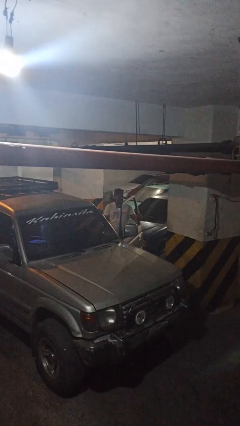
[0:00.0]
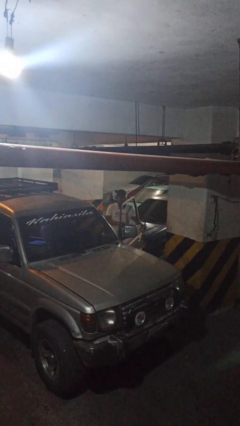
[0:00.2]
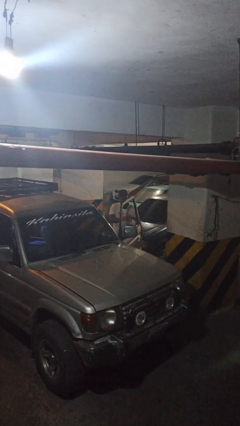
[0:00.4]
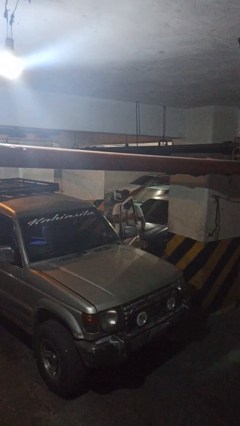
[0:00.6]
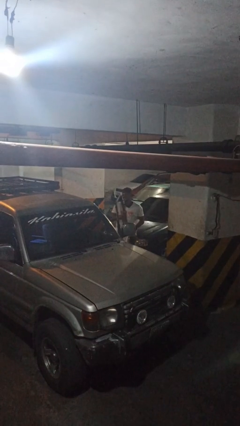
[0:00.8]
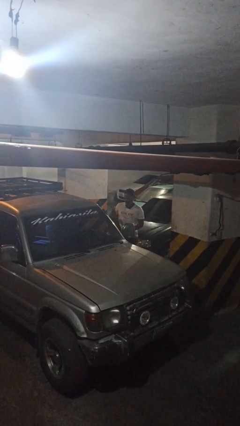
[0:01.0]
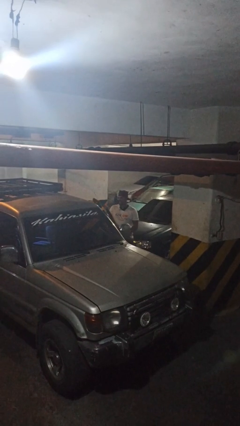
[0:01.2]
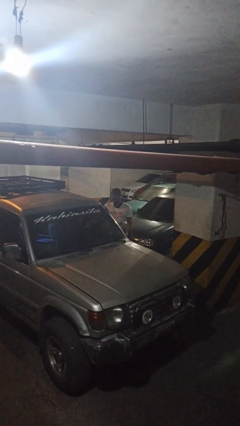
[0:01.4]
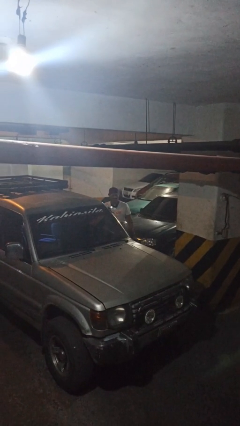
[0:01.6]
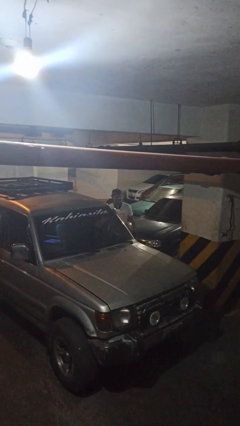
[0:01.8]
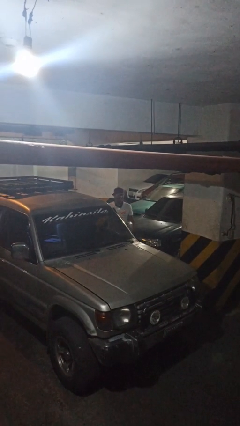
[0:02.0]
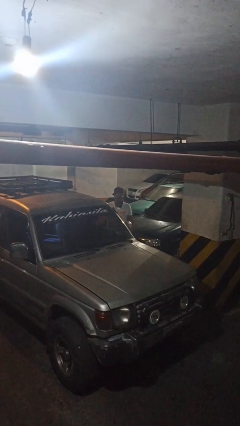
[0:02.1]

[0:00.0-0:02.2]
person closes car door

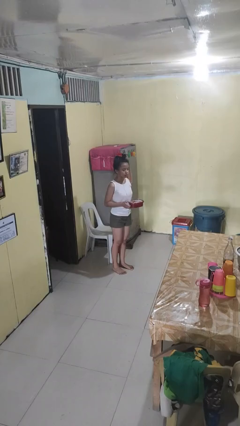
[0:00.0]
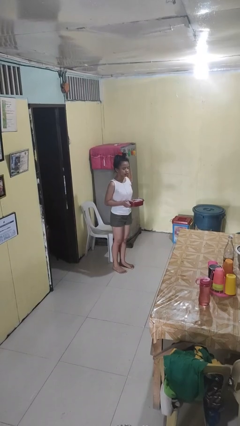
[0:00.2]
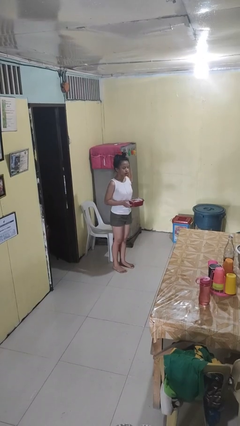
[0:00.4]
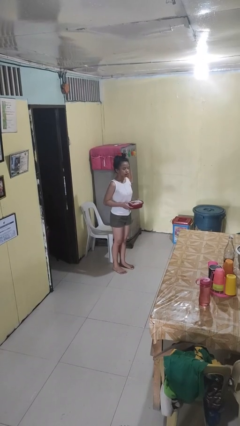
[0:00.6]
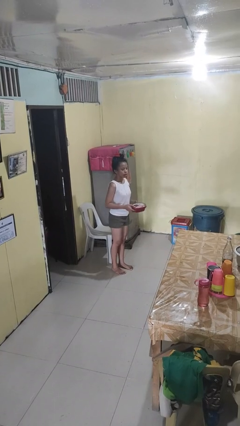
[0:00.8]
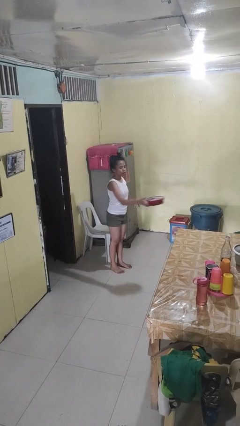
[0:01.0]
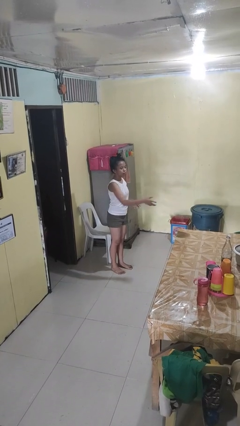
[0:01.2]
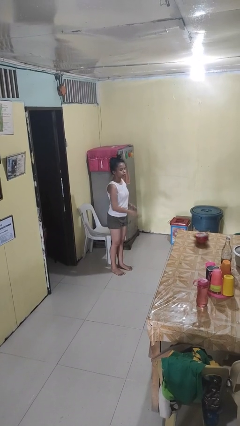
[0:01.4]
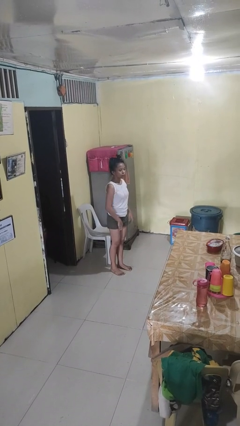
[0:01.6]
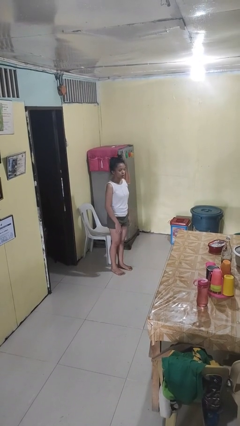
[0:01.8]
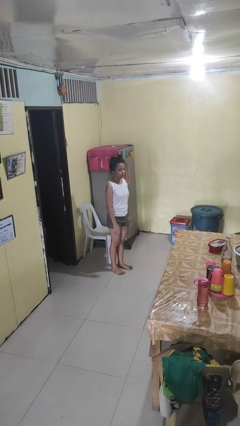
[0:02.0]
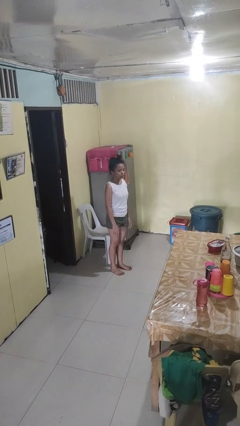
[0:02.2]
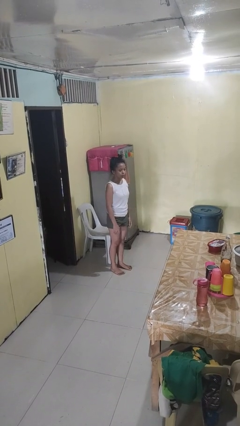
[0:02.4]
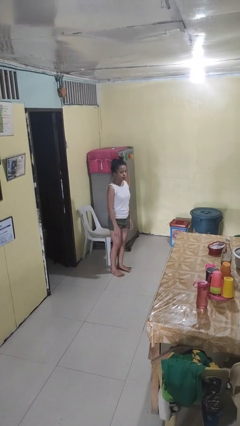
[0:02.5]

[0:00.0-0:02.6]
person throws object on table

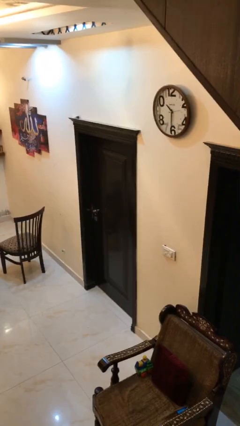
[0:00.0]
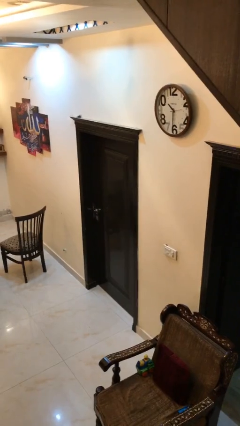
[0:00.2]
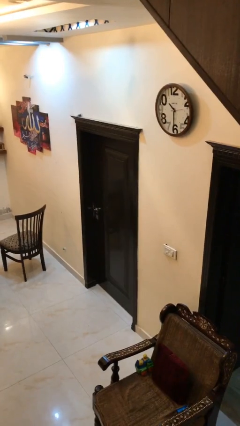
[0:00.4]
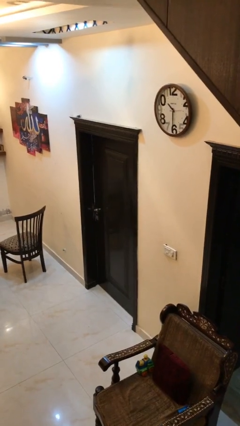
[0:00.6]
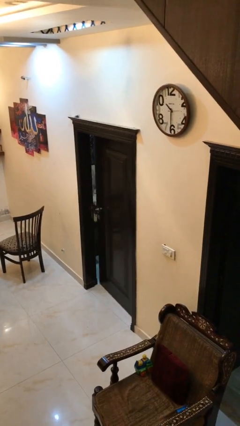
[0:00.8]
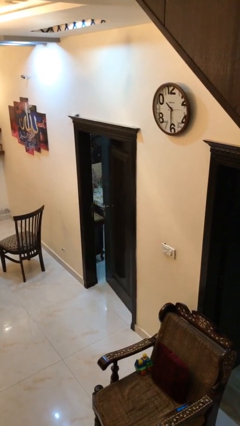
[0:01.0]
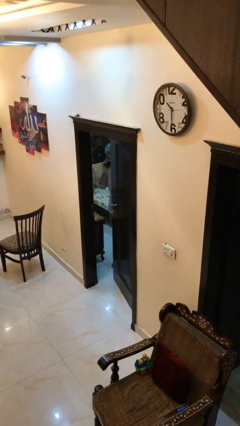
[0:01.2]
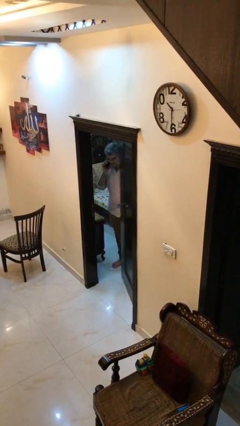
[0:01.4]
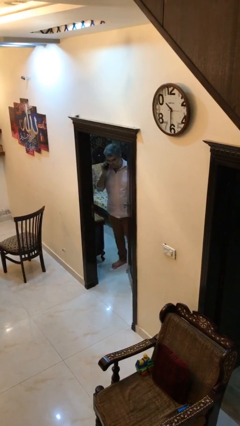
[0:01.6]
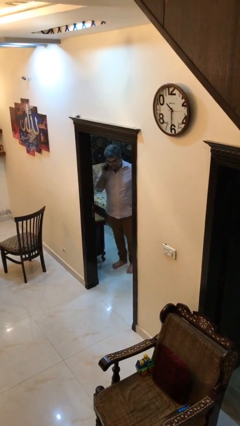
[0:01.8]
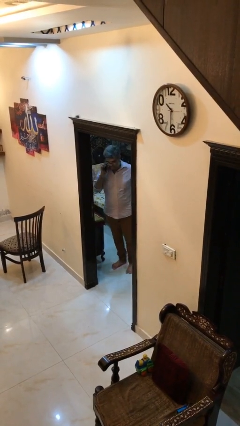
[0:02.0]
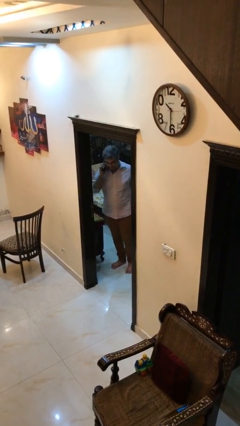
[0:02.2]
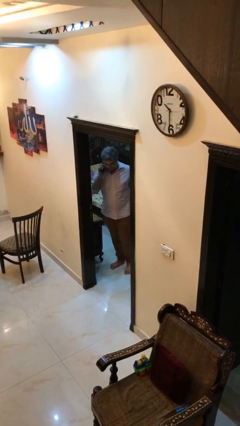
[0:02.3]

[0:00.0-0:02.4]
person opens facility door

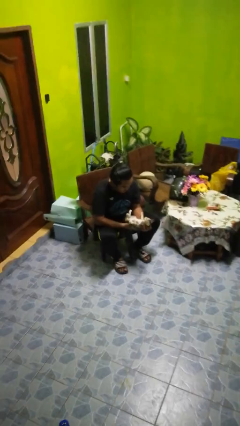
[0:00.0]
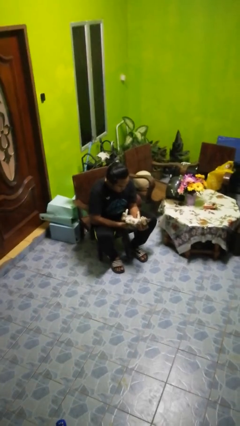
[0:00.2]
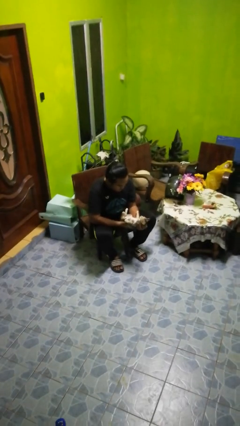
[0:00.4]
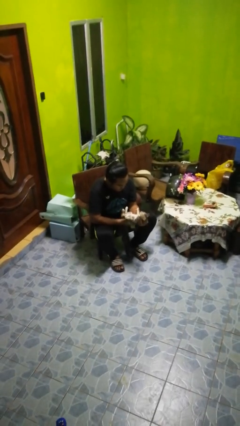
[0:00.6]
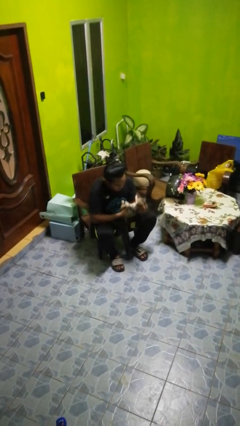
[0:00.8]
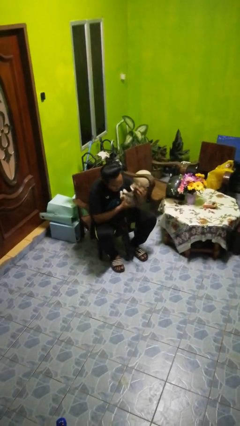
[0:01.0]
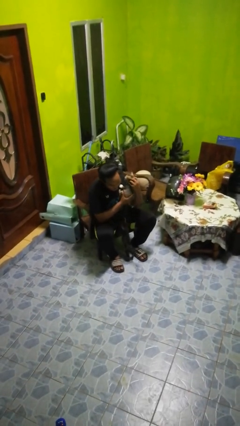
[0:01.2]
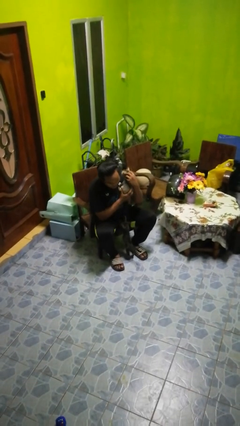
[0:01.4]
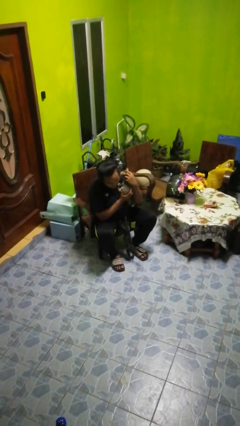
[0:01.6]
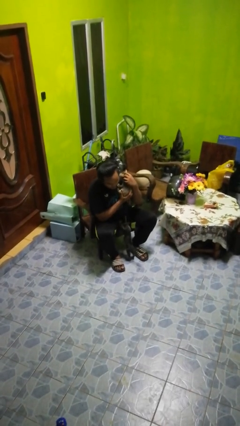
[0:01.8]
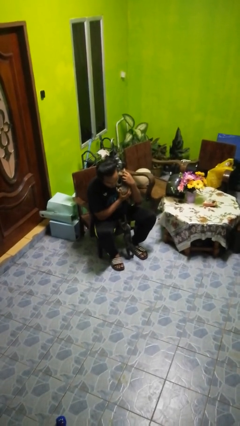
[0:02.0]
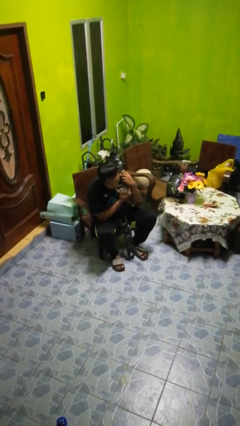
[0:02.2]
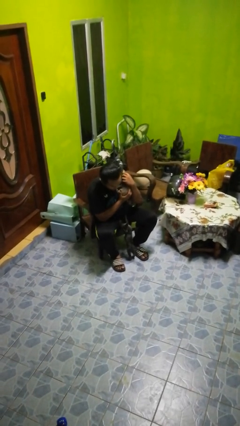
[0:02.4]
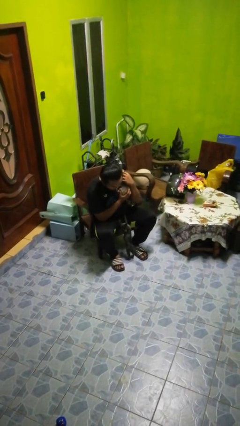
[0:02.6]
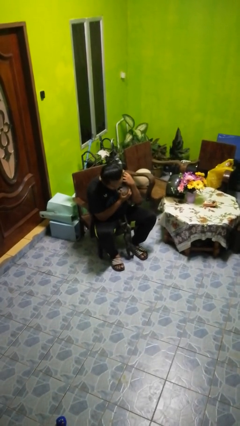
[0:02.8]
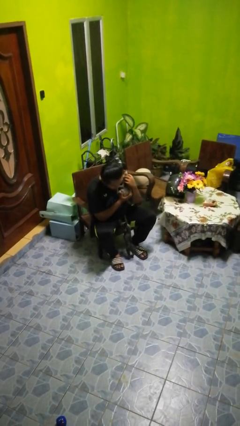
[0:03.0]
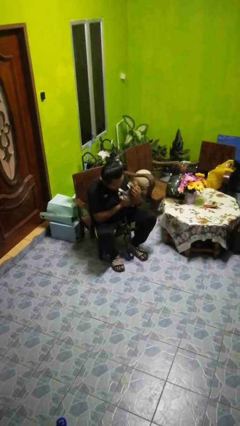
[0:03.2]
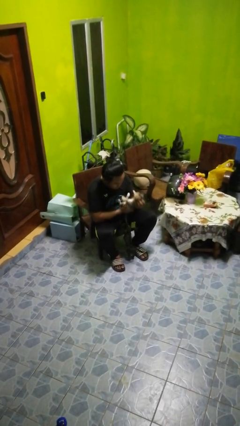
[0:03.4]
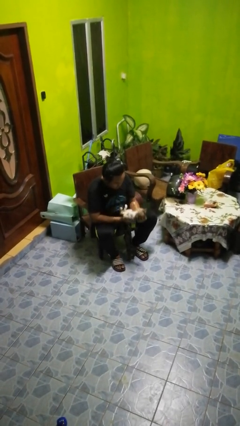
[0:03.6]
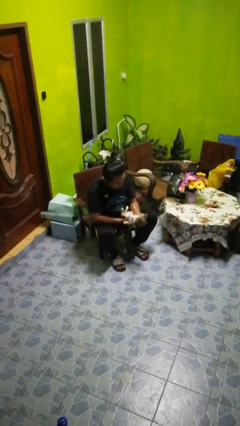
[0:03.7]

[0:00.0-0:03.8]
person hugs cat

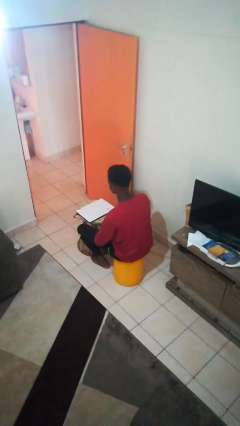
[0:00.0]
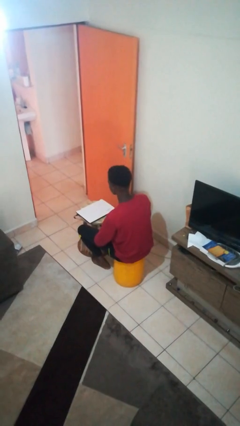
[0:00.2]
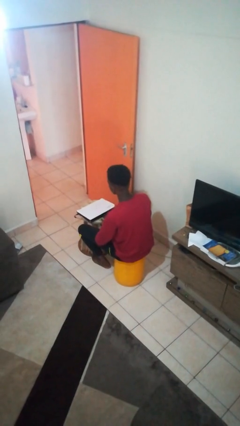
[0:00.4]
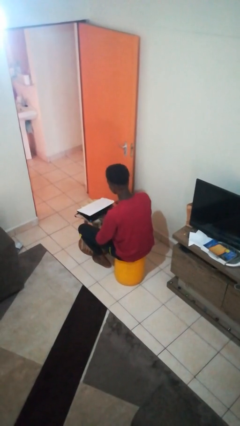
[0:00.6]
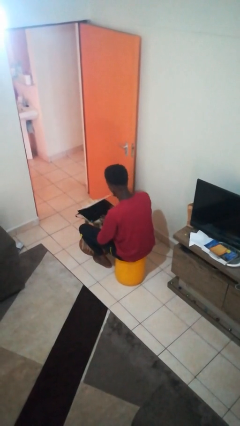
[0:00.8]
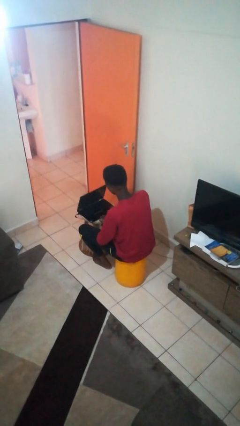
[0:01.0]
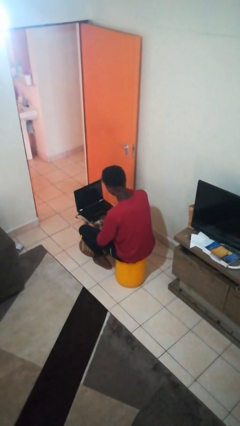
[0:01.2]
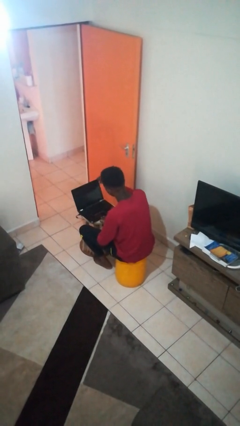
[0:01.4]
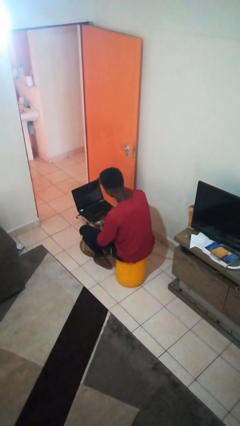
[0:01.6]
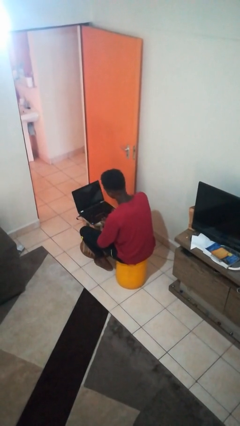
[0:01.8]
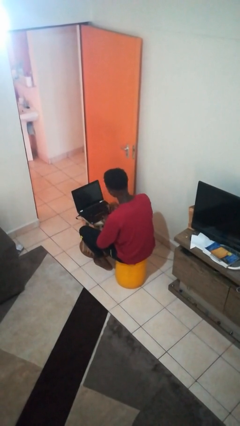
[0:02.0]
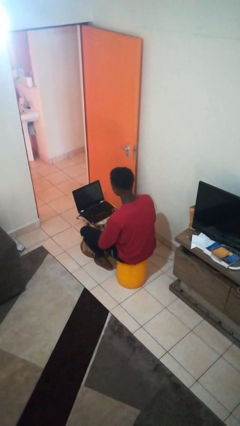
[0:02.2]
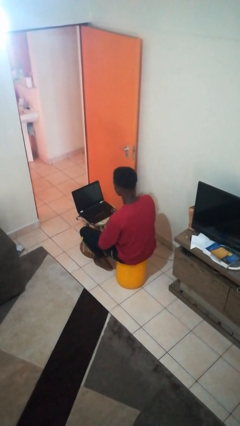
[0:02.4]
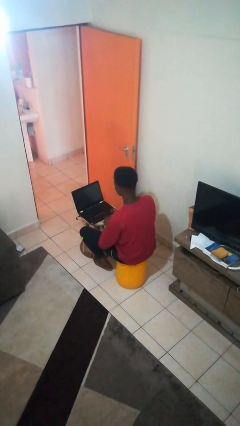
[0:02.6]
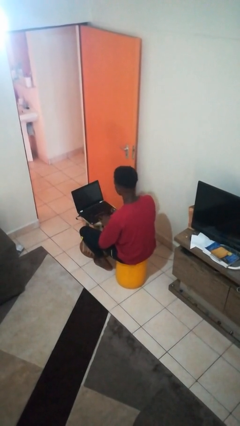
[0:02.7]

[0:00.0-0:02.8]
person opens laptop

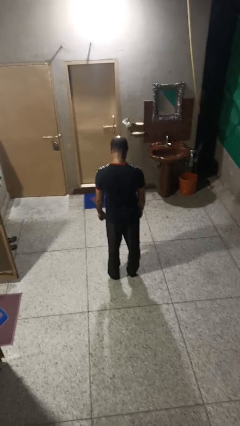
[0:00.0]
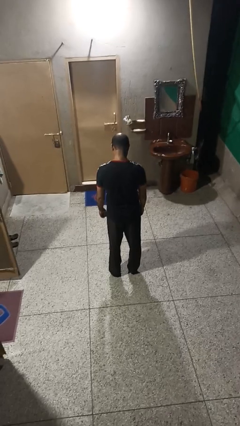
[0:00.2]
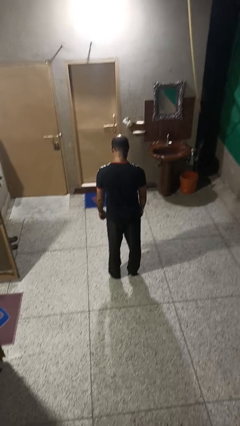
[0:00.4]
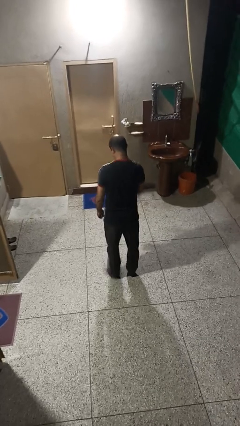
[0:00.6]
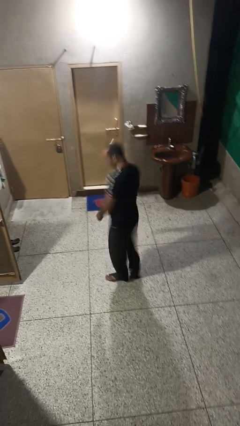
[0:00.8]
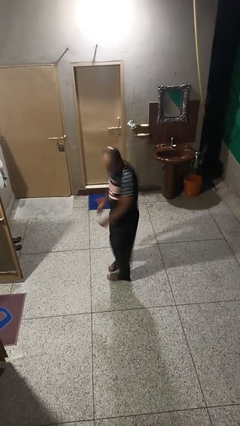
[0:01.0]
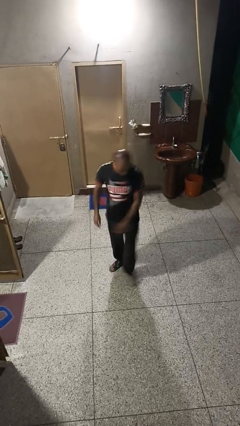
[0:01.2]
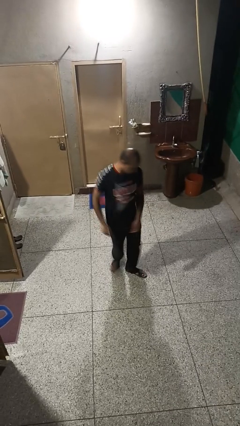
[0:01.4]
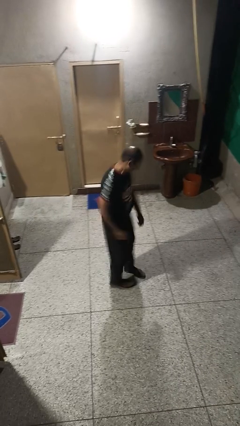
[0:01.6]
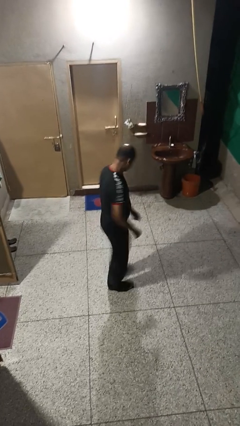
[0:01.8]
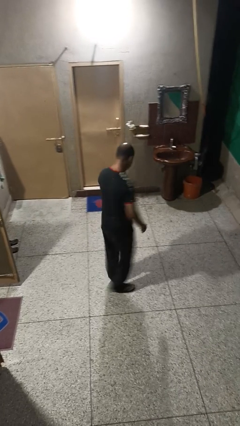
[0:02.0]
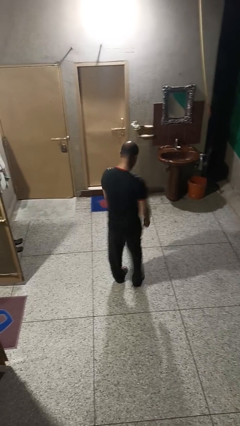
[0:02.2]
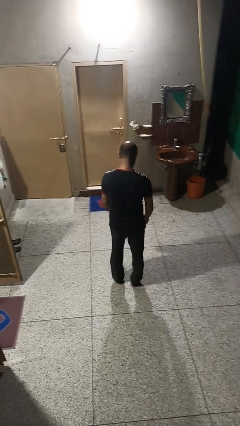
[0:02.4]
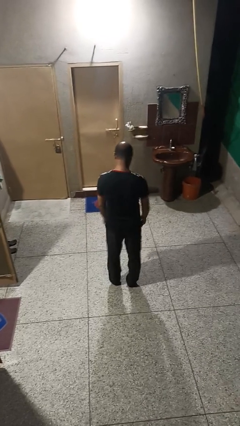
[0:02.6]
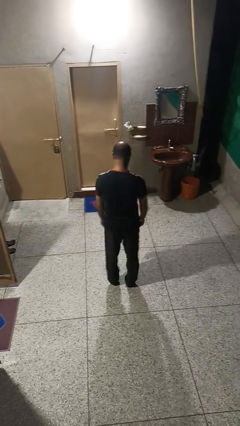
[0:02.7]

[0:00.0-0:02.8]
person twirls

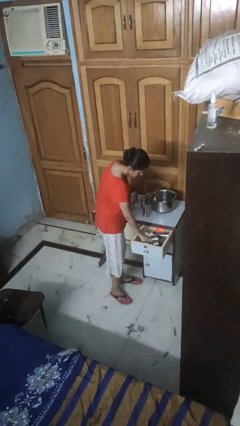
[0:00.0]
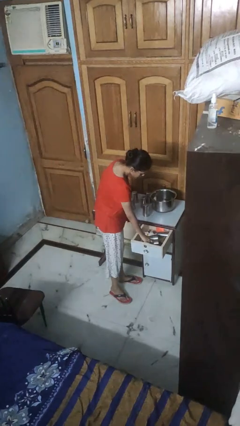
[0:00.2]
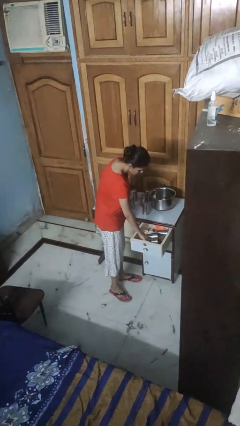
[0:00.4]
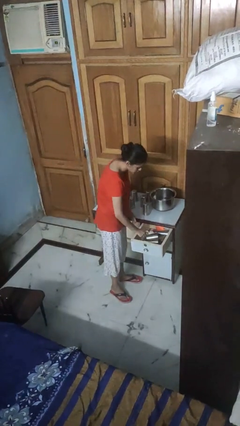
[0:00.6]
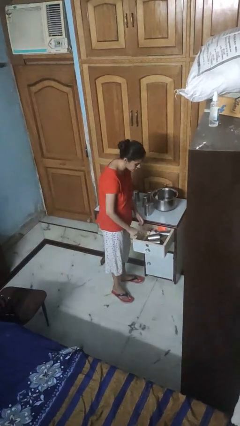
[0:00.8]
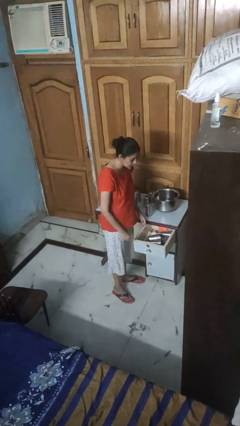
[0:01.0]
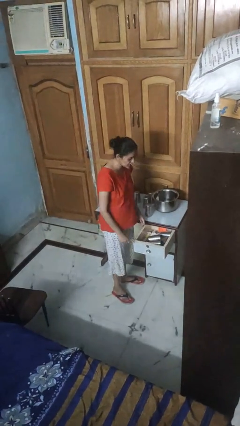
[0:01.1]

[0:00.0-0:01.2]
person puts object into kitchen drawer
